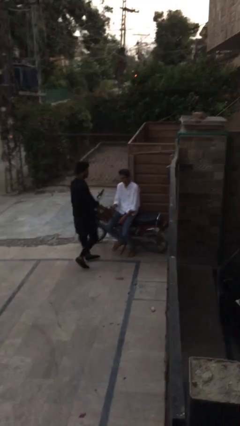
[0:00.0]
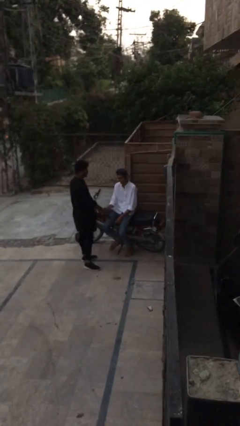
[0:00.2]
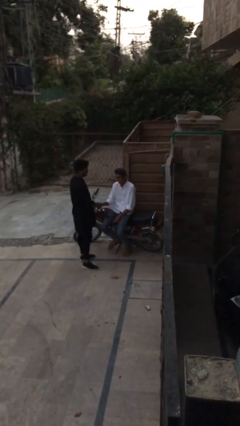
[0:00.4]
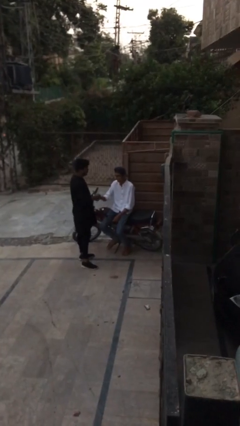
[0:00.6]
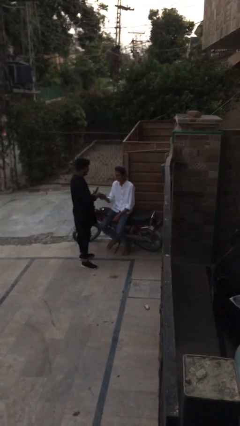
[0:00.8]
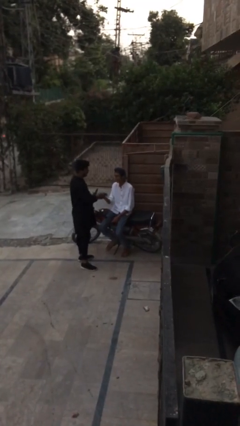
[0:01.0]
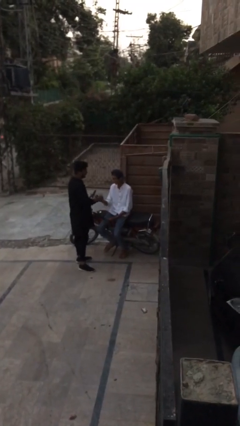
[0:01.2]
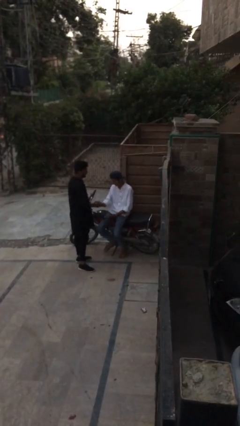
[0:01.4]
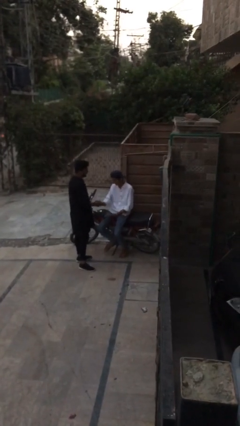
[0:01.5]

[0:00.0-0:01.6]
person shakes hand

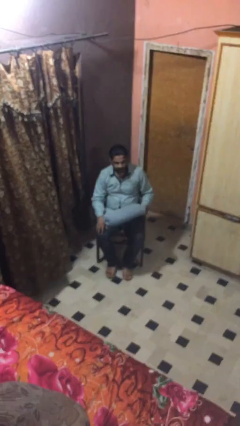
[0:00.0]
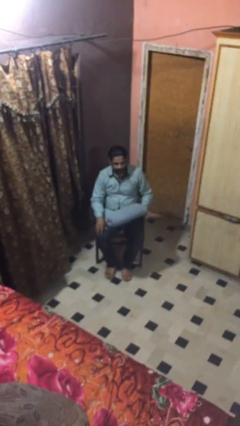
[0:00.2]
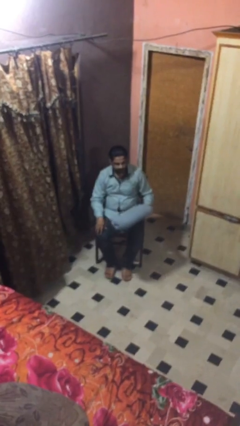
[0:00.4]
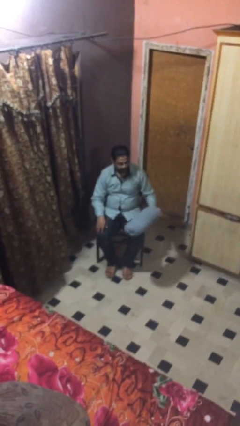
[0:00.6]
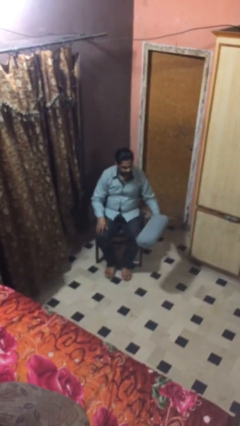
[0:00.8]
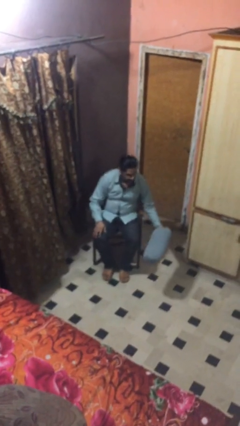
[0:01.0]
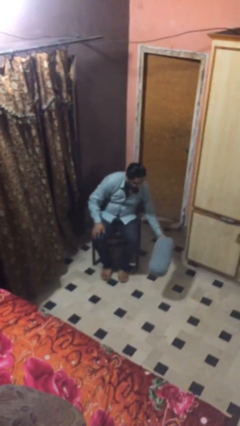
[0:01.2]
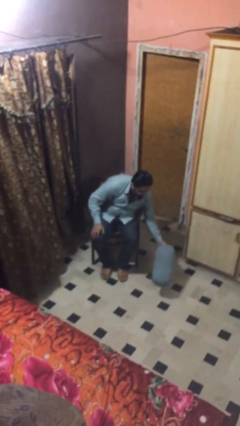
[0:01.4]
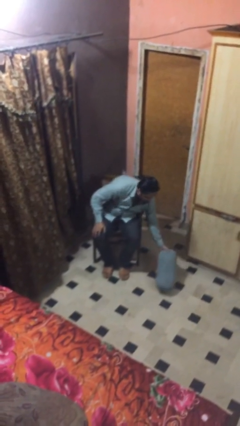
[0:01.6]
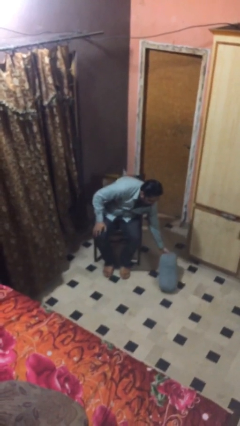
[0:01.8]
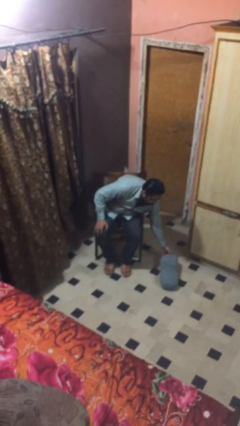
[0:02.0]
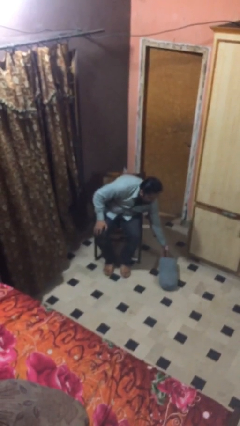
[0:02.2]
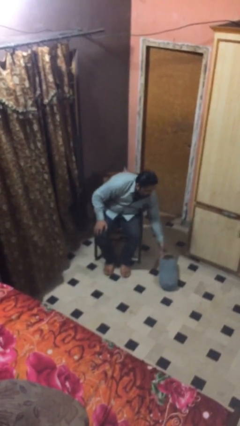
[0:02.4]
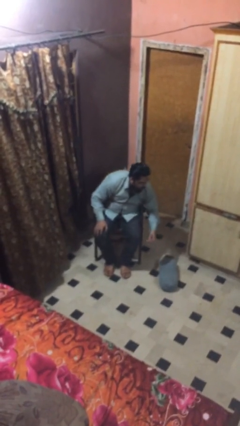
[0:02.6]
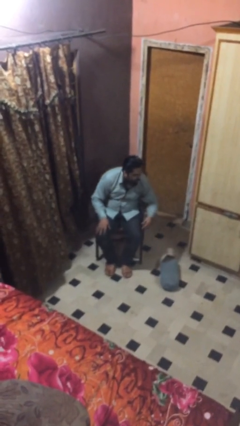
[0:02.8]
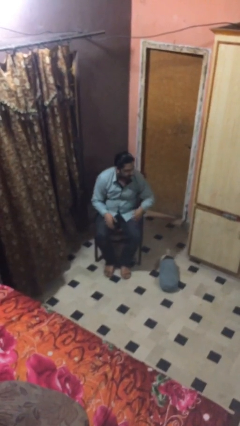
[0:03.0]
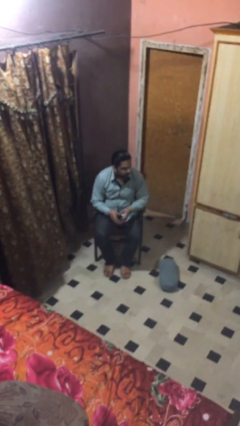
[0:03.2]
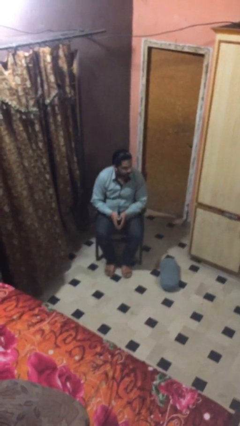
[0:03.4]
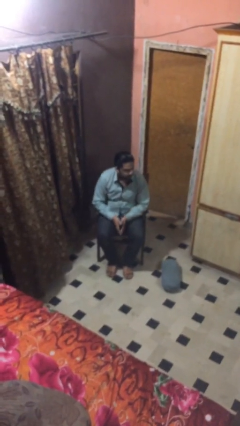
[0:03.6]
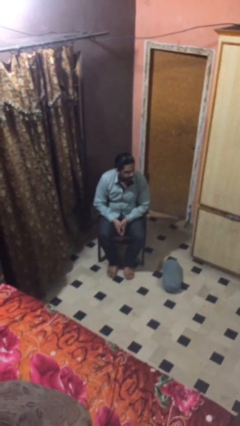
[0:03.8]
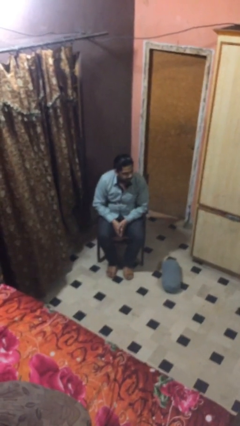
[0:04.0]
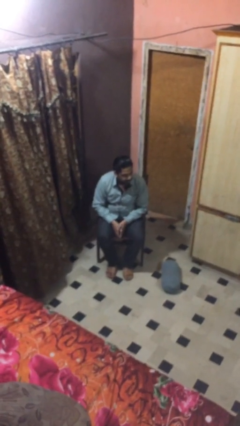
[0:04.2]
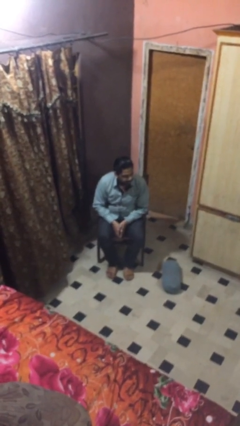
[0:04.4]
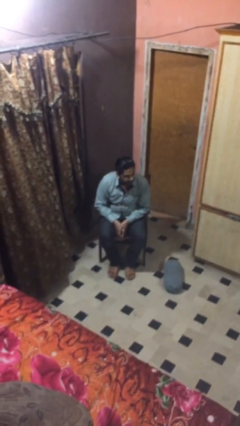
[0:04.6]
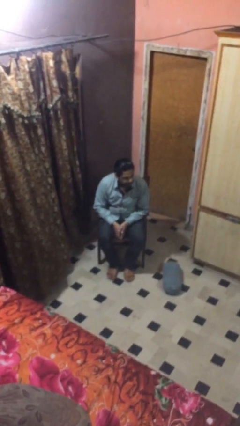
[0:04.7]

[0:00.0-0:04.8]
person puts down object on floor

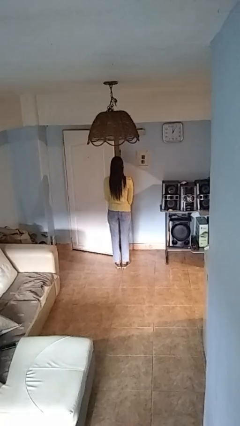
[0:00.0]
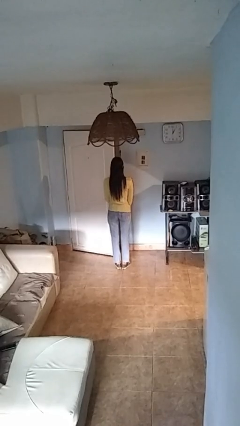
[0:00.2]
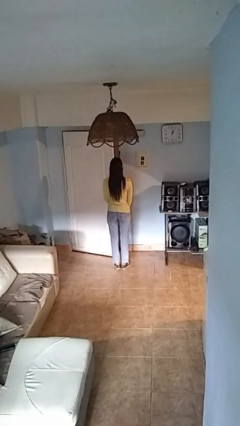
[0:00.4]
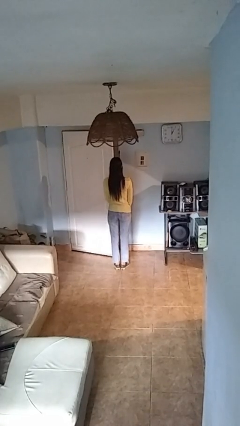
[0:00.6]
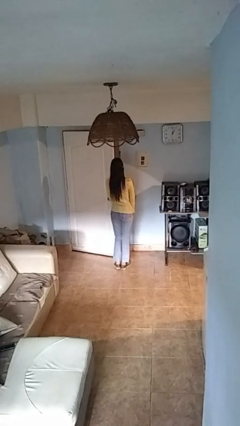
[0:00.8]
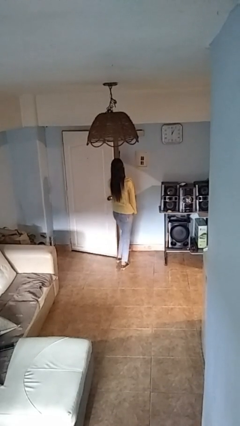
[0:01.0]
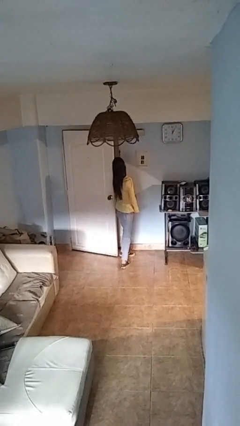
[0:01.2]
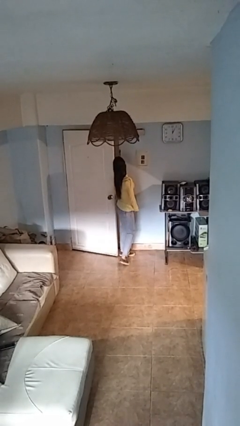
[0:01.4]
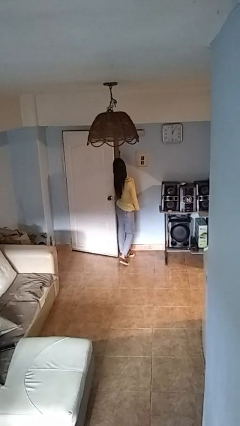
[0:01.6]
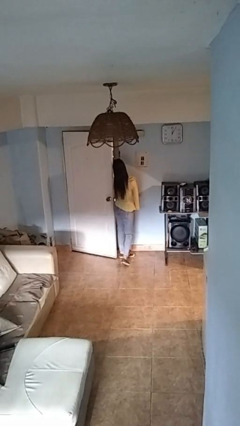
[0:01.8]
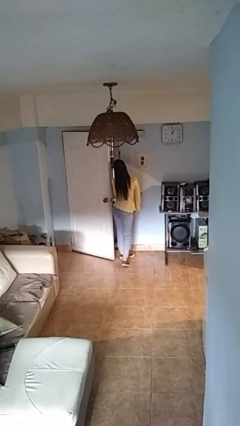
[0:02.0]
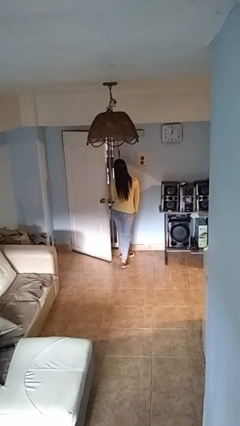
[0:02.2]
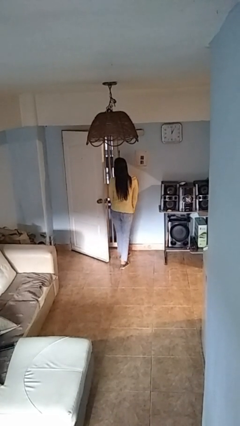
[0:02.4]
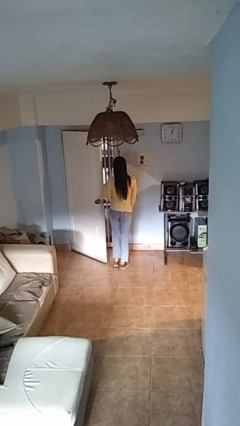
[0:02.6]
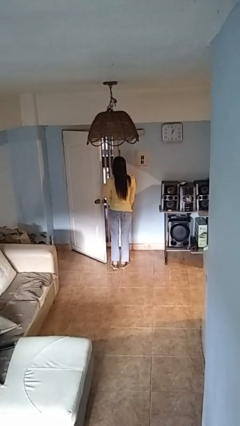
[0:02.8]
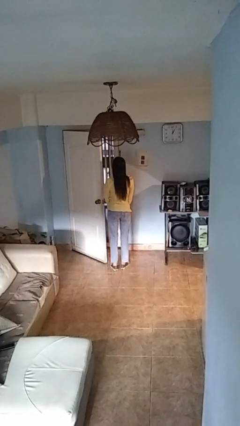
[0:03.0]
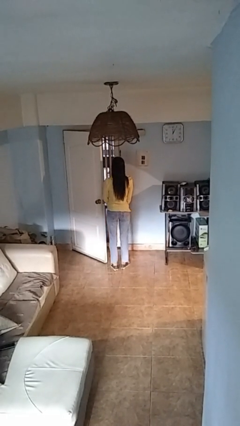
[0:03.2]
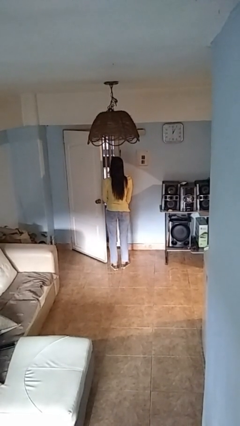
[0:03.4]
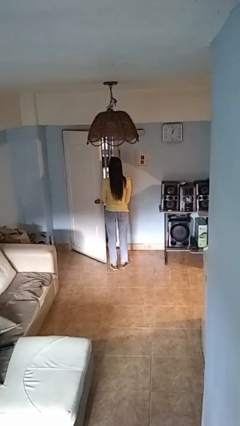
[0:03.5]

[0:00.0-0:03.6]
person opens facility door

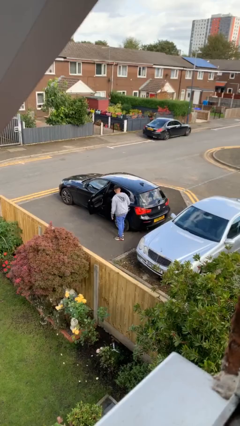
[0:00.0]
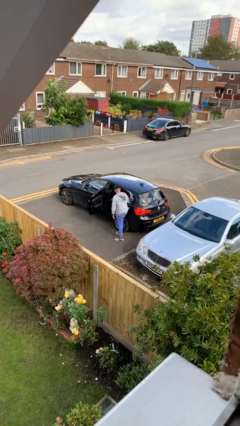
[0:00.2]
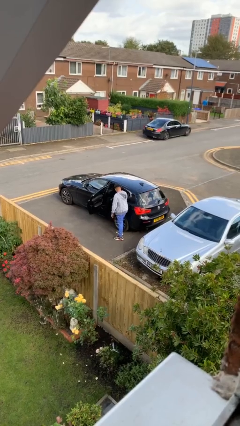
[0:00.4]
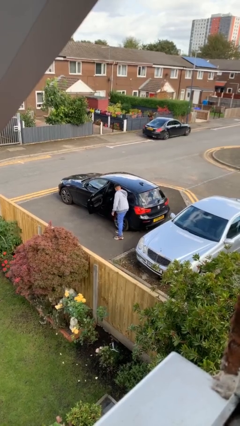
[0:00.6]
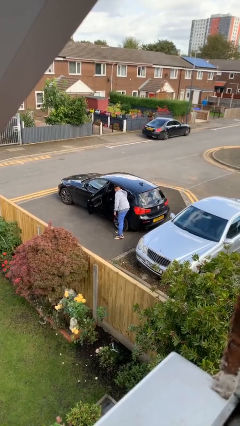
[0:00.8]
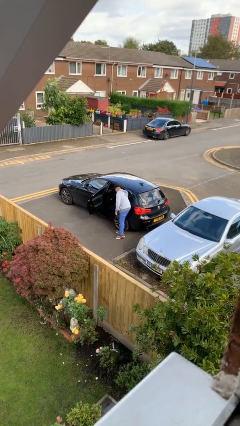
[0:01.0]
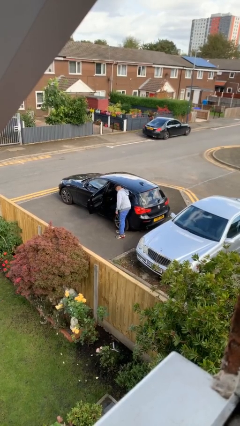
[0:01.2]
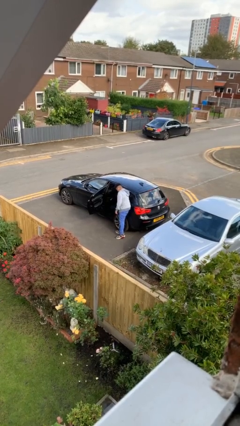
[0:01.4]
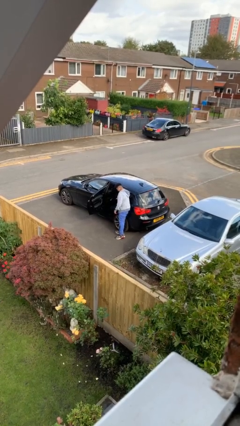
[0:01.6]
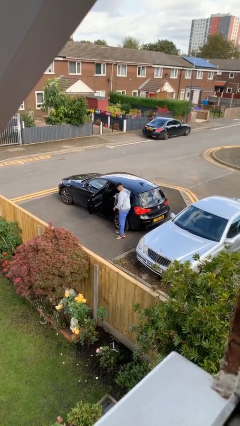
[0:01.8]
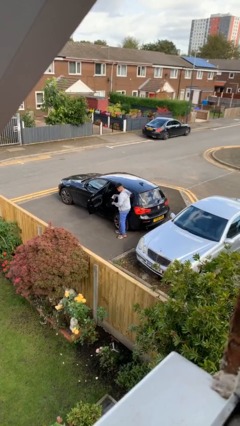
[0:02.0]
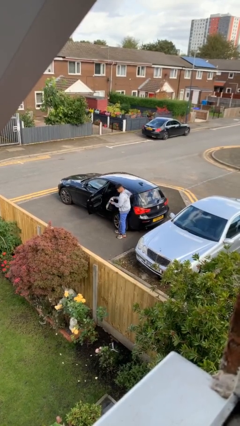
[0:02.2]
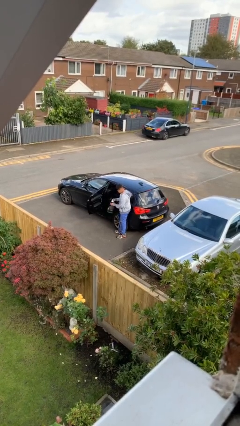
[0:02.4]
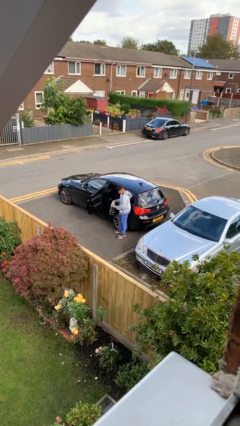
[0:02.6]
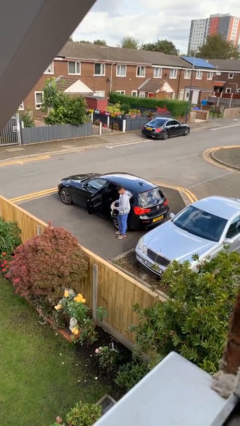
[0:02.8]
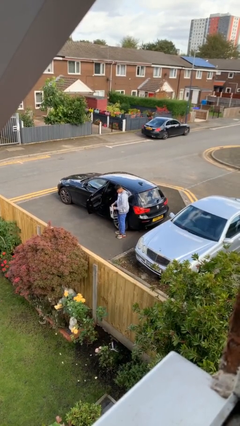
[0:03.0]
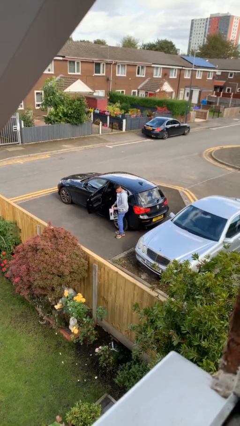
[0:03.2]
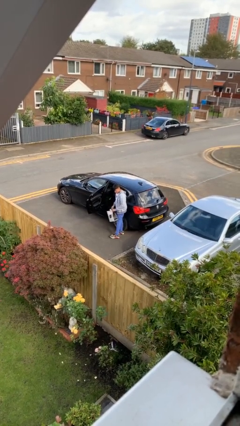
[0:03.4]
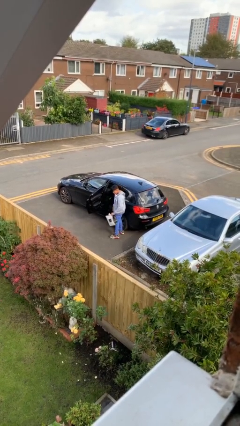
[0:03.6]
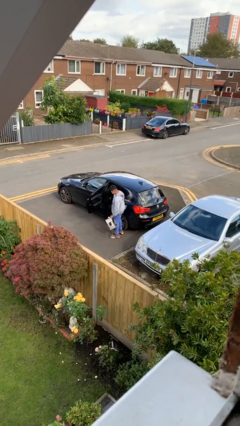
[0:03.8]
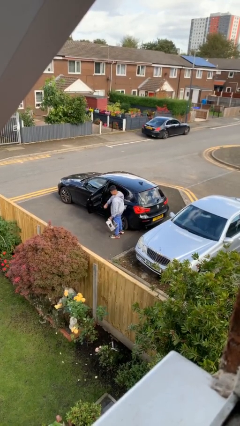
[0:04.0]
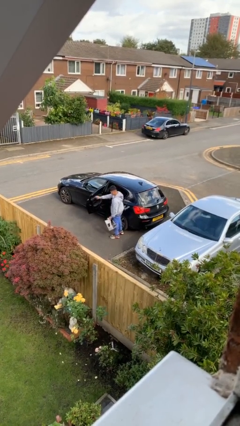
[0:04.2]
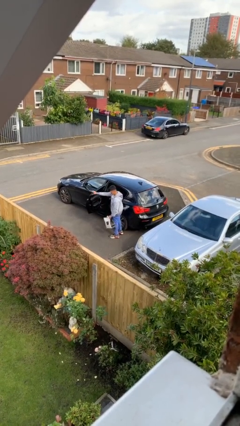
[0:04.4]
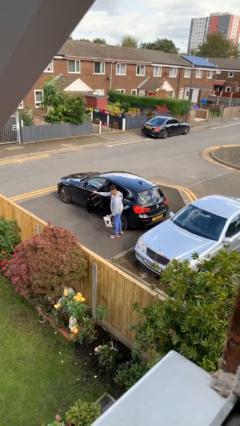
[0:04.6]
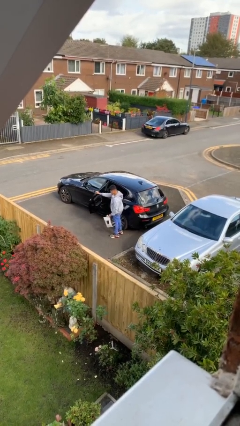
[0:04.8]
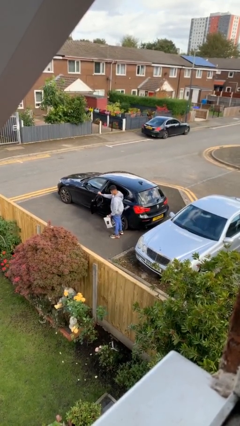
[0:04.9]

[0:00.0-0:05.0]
person unloads car

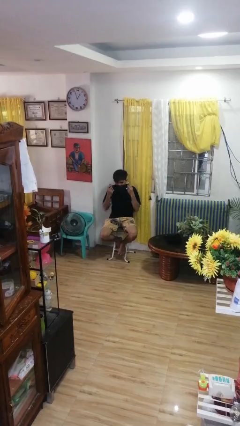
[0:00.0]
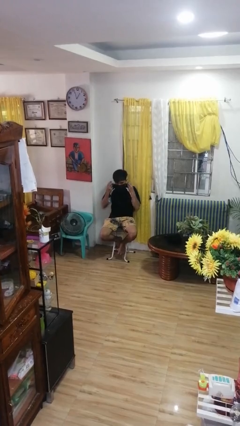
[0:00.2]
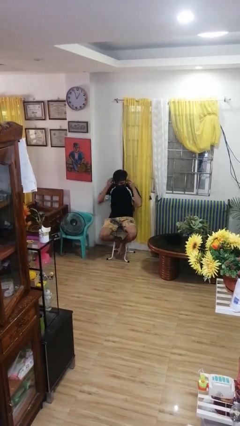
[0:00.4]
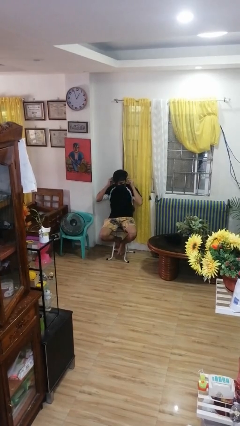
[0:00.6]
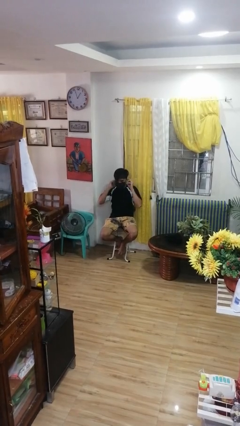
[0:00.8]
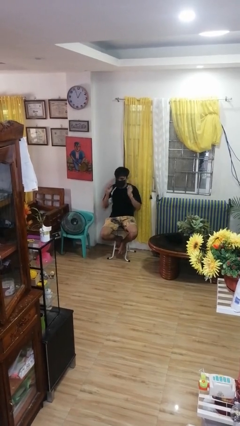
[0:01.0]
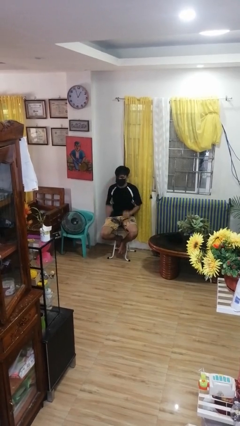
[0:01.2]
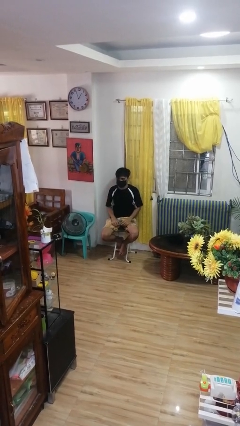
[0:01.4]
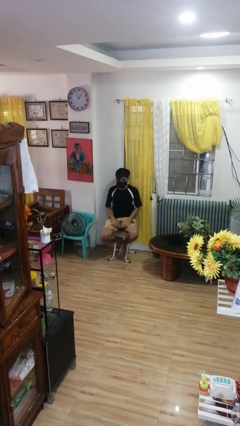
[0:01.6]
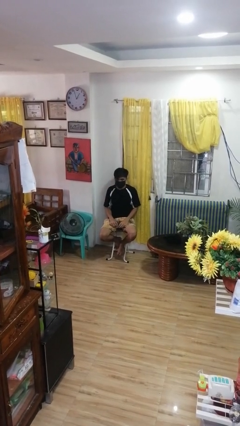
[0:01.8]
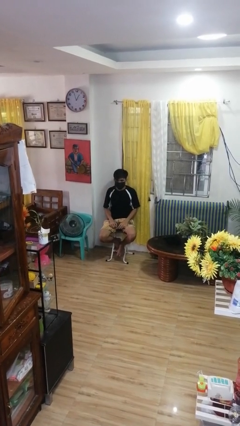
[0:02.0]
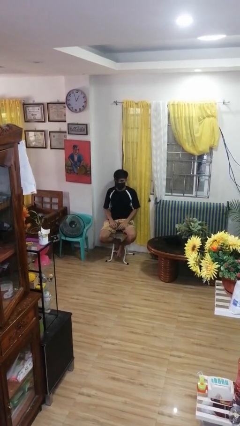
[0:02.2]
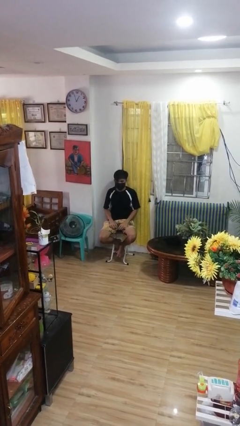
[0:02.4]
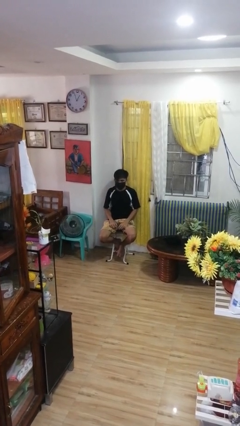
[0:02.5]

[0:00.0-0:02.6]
person puts on facemask

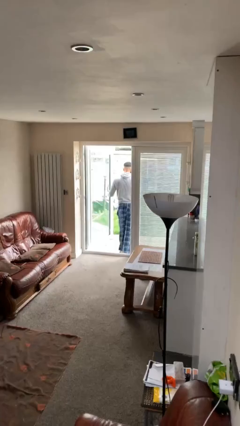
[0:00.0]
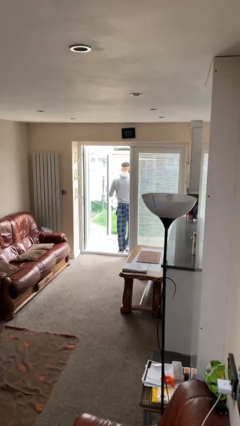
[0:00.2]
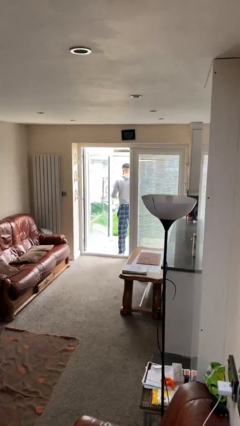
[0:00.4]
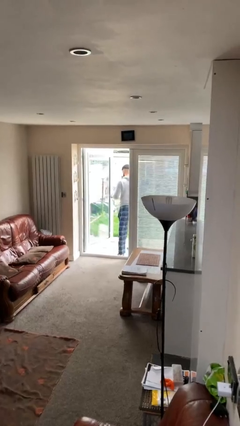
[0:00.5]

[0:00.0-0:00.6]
person closes facility door
